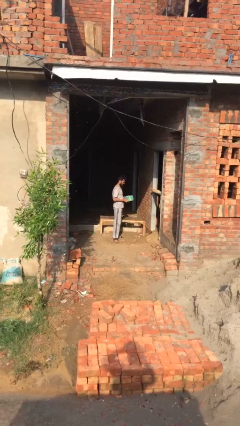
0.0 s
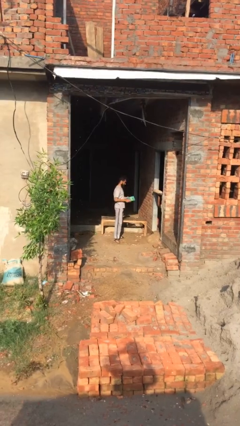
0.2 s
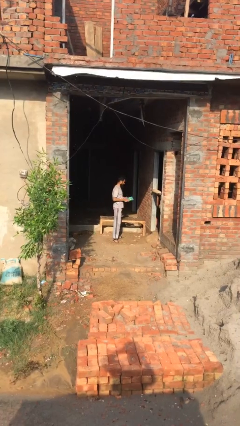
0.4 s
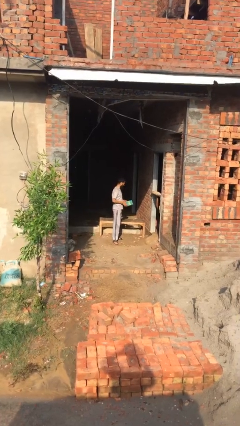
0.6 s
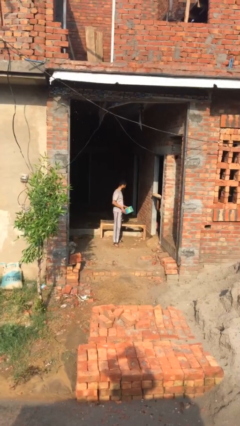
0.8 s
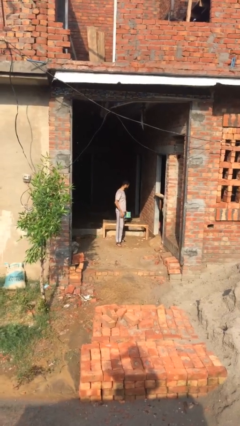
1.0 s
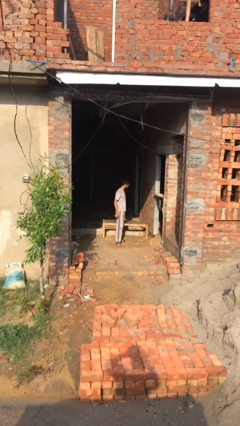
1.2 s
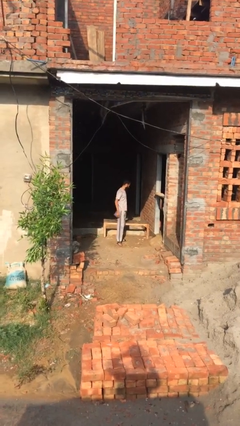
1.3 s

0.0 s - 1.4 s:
person puts down object on table

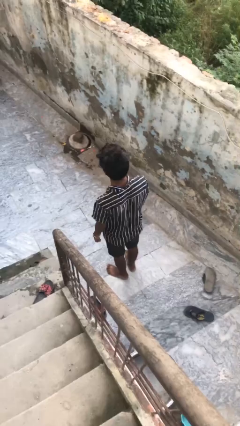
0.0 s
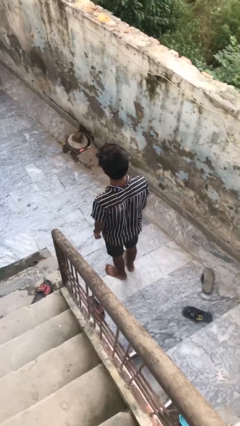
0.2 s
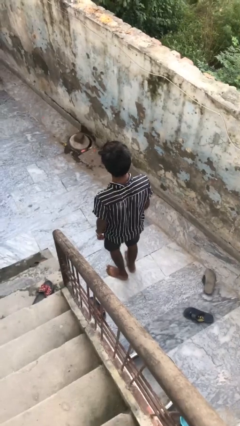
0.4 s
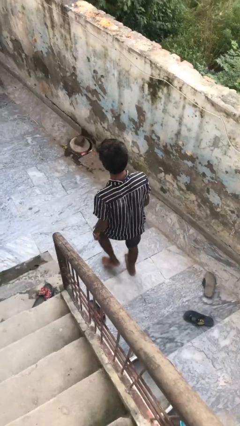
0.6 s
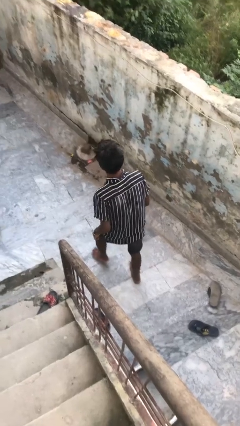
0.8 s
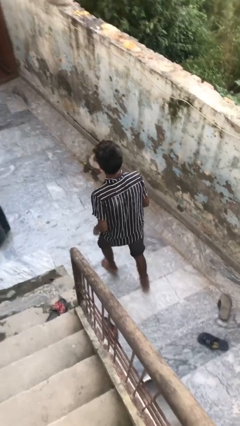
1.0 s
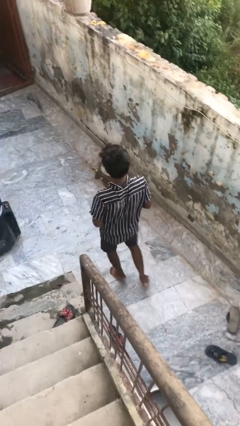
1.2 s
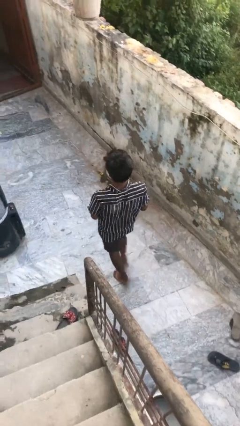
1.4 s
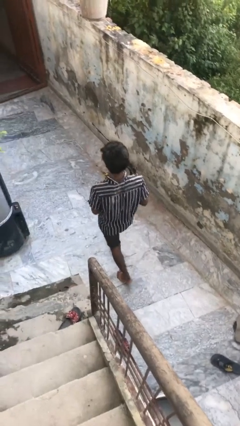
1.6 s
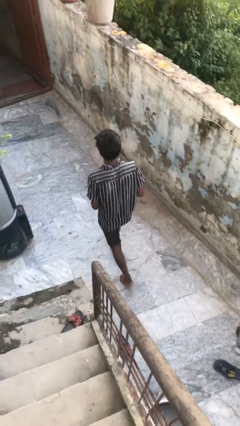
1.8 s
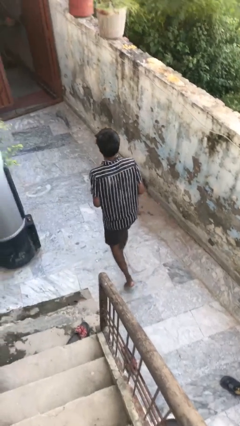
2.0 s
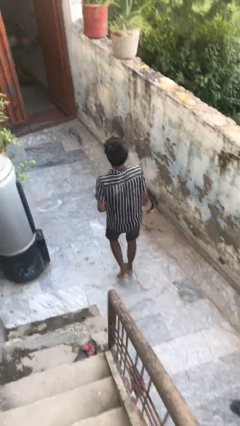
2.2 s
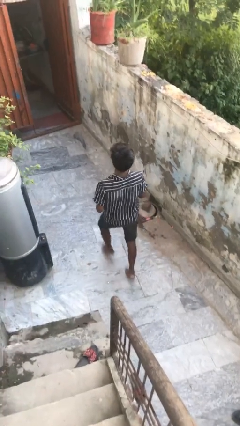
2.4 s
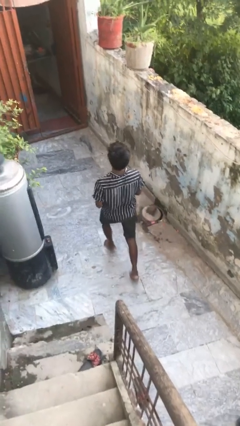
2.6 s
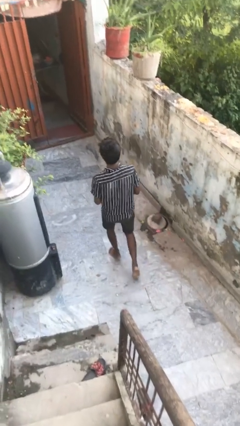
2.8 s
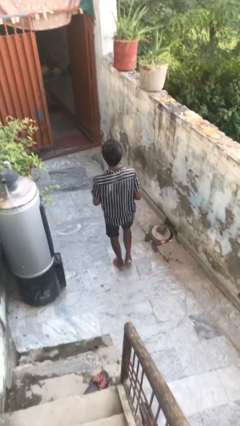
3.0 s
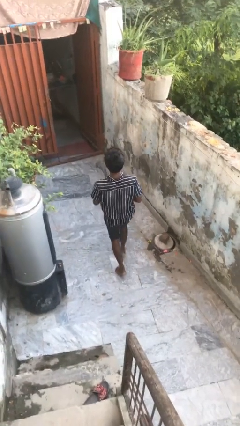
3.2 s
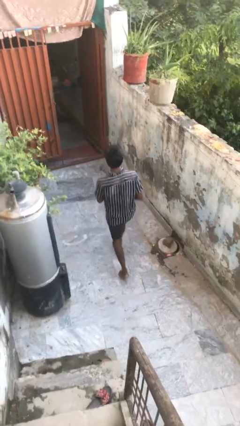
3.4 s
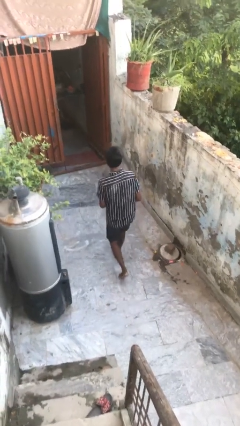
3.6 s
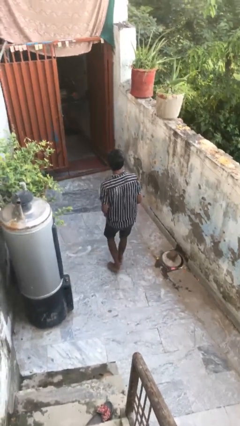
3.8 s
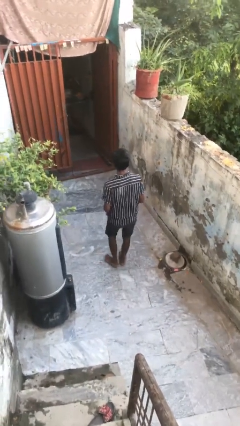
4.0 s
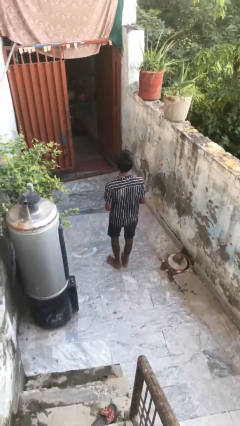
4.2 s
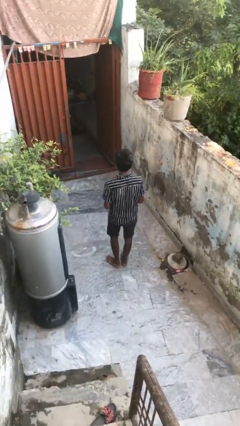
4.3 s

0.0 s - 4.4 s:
person walks tiptoe

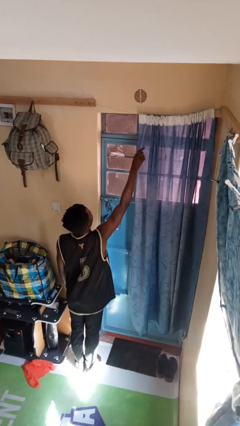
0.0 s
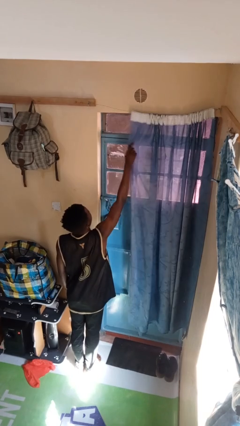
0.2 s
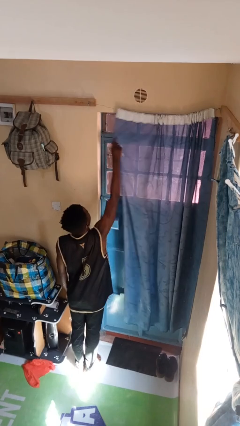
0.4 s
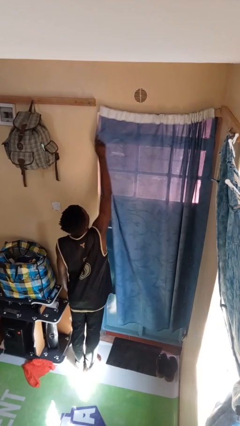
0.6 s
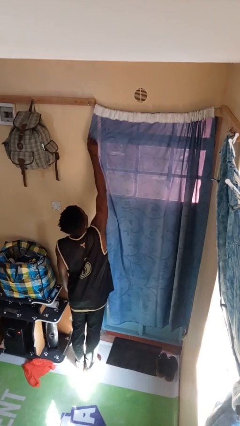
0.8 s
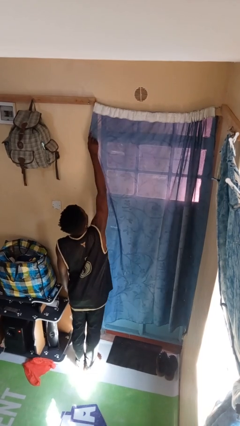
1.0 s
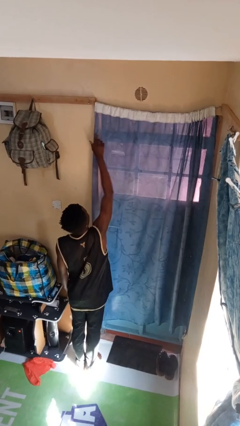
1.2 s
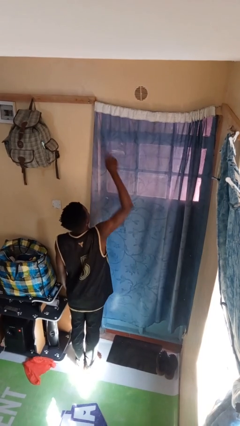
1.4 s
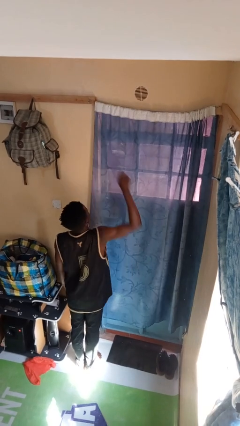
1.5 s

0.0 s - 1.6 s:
person closes curtains

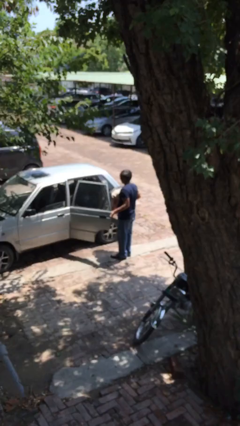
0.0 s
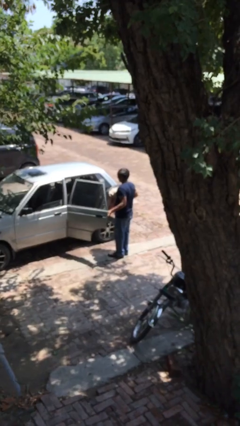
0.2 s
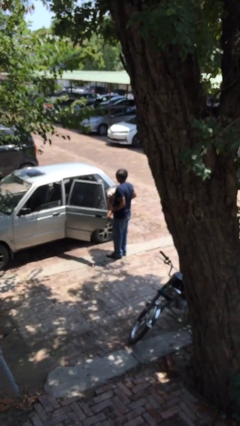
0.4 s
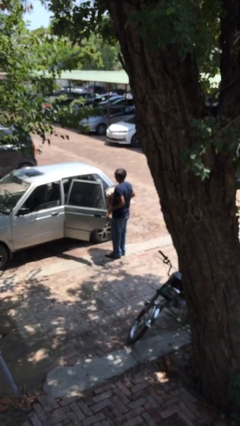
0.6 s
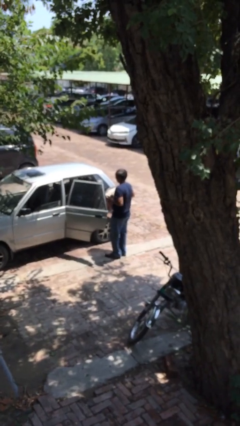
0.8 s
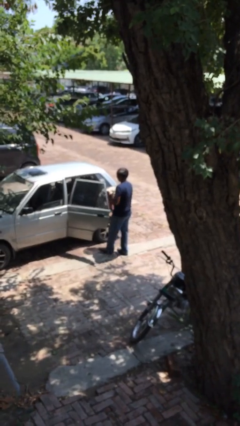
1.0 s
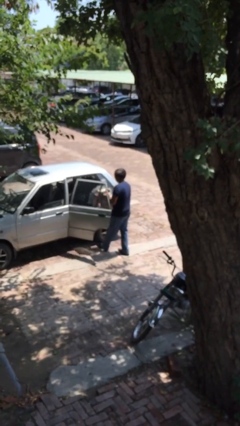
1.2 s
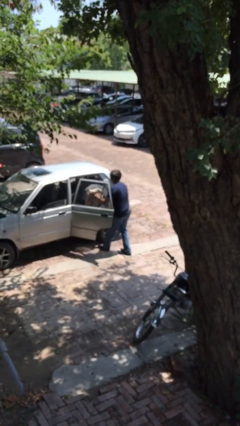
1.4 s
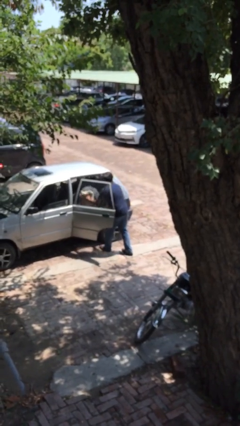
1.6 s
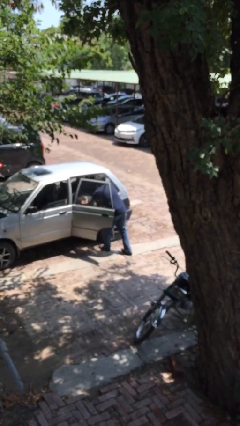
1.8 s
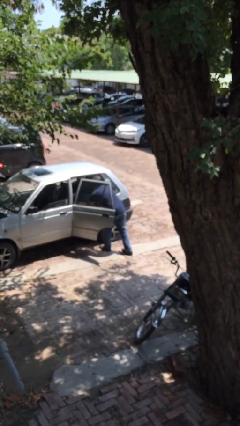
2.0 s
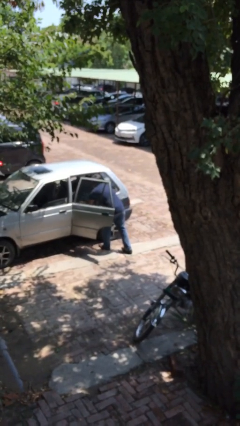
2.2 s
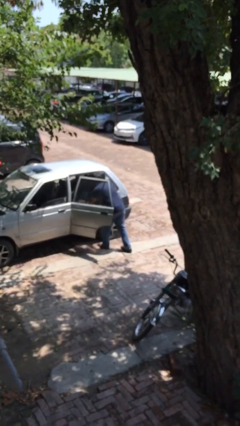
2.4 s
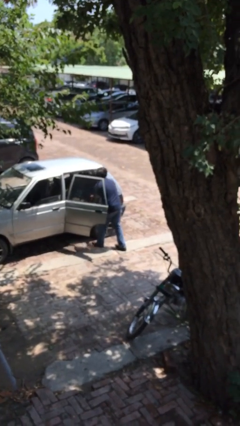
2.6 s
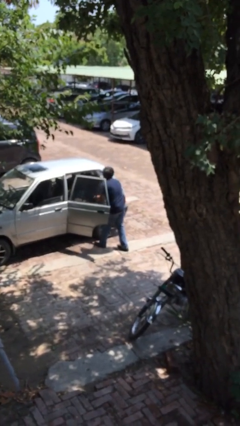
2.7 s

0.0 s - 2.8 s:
person loads car

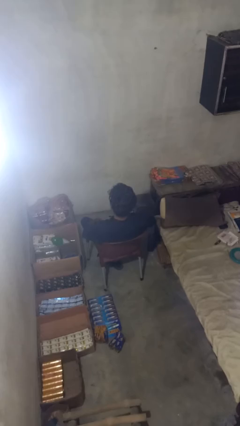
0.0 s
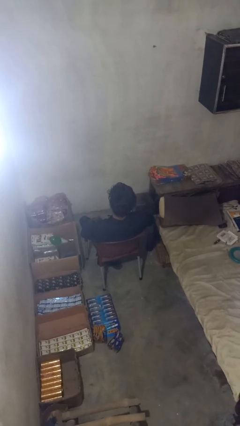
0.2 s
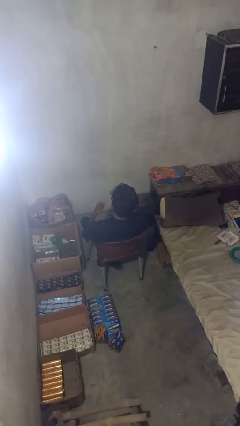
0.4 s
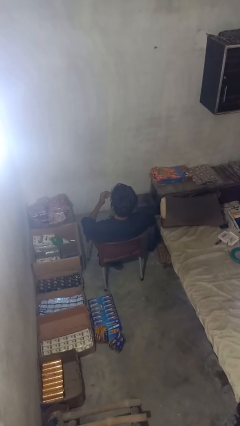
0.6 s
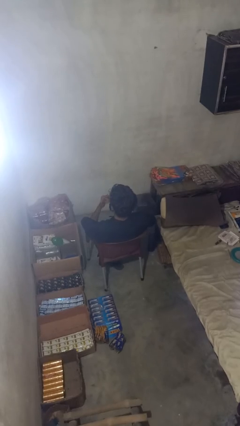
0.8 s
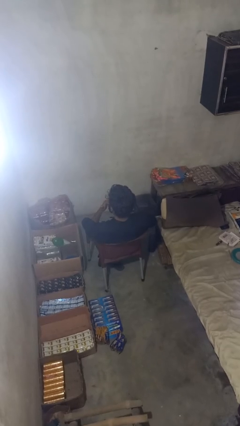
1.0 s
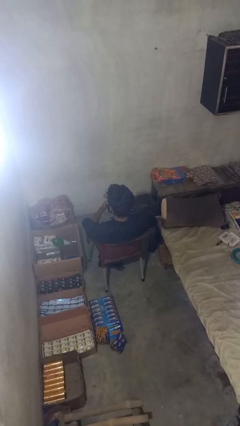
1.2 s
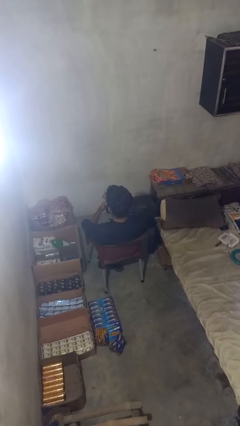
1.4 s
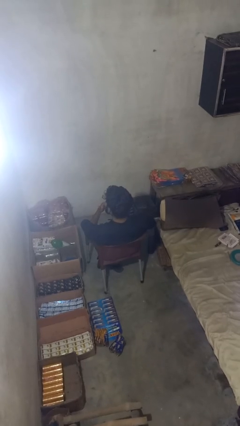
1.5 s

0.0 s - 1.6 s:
person licks fingers

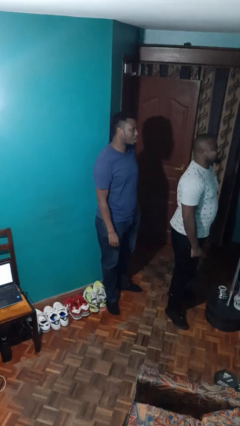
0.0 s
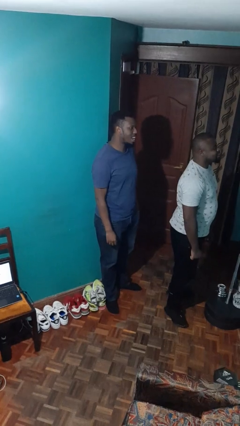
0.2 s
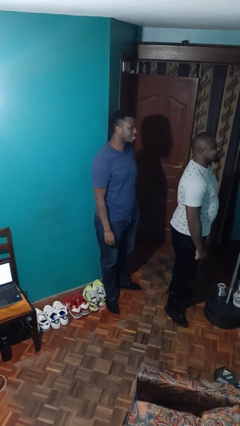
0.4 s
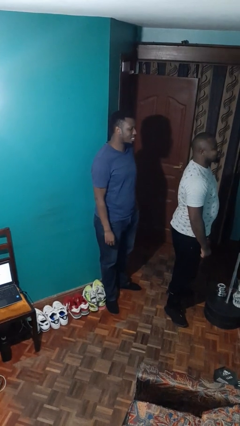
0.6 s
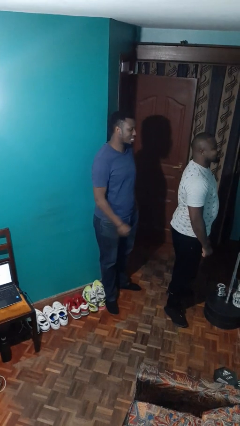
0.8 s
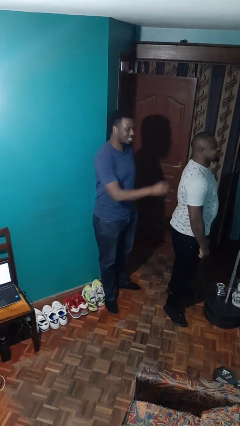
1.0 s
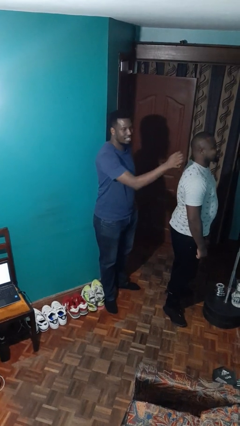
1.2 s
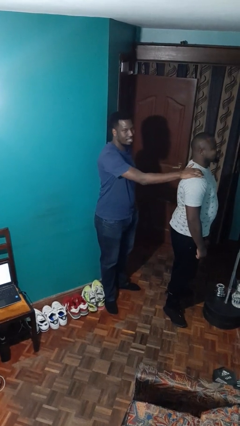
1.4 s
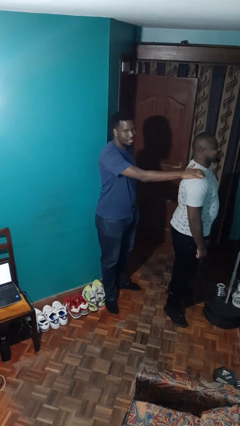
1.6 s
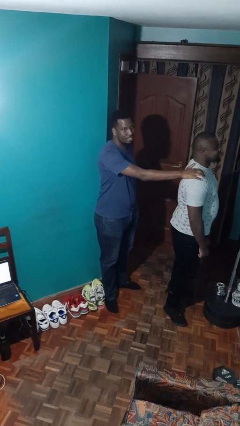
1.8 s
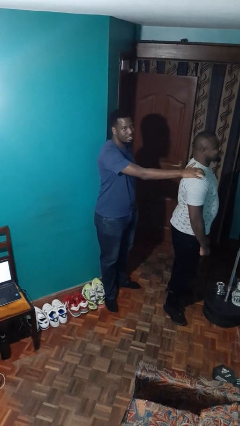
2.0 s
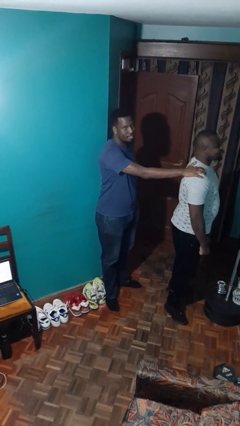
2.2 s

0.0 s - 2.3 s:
person grabs person by shoulder

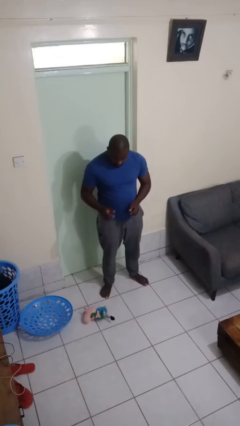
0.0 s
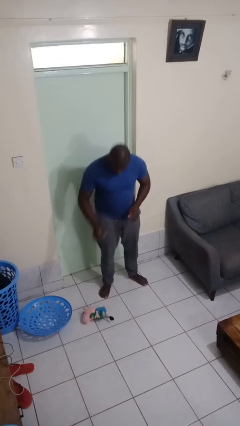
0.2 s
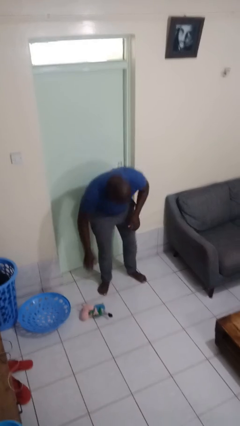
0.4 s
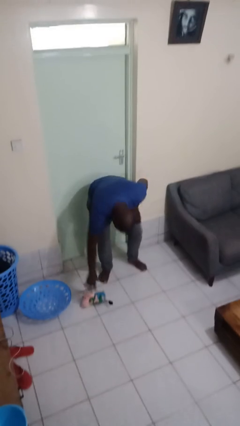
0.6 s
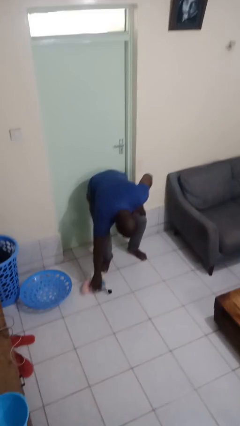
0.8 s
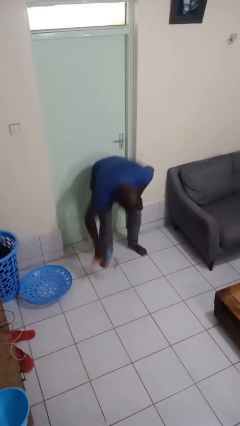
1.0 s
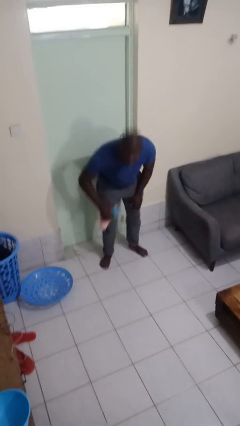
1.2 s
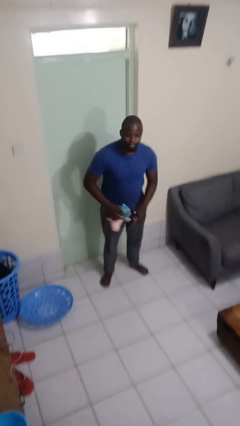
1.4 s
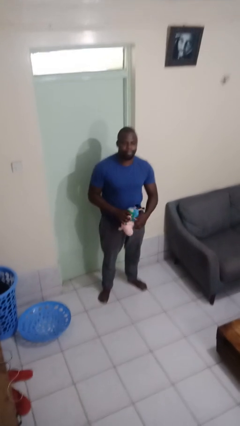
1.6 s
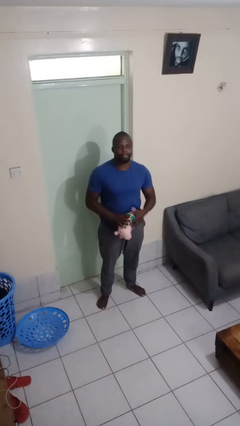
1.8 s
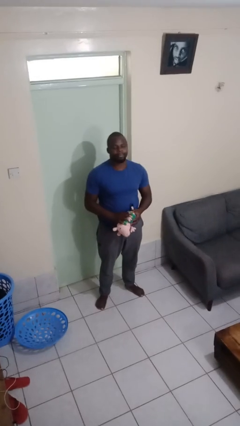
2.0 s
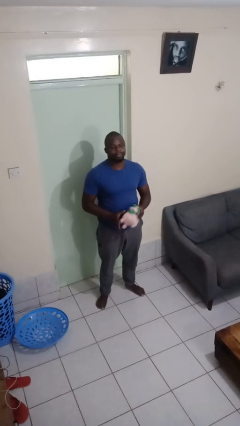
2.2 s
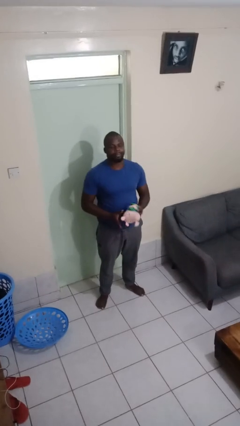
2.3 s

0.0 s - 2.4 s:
person picks up object from floor

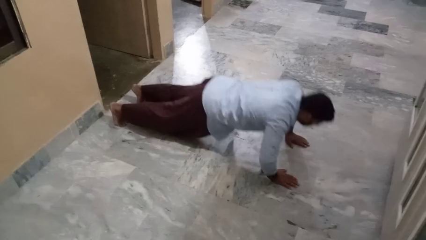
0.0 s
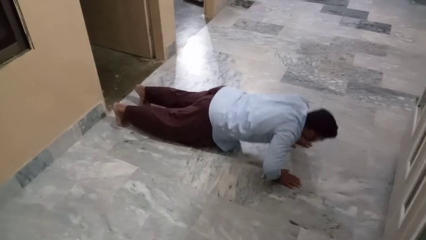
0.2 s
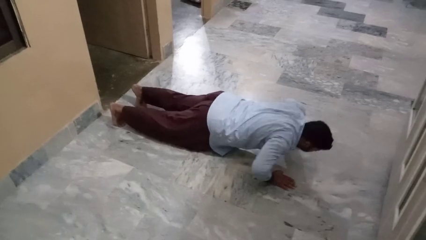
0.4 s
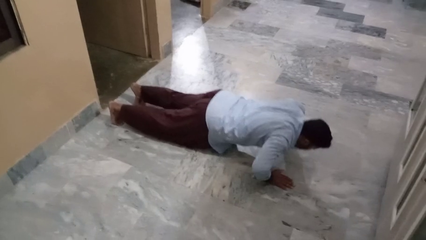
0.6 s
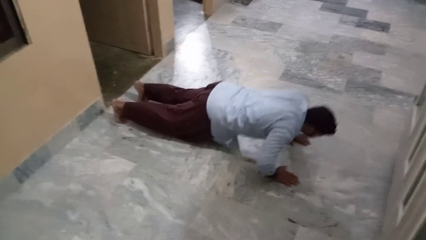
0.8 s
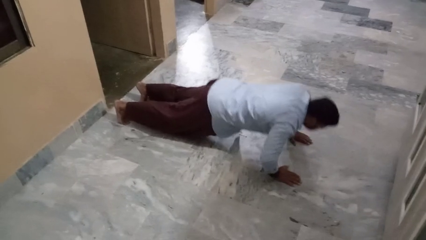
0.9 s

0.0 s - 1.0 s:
person exercises with pushup
